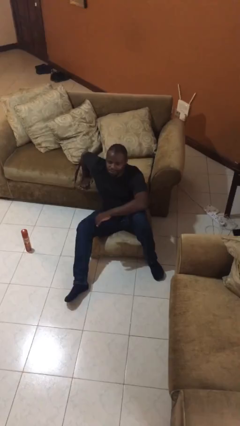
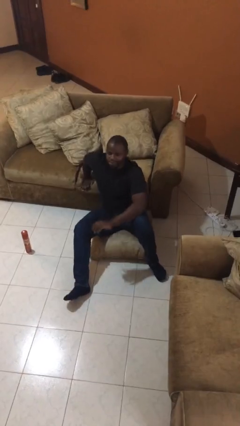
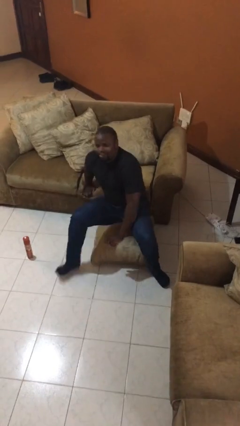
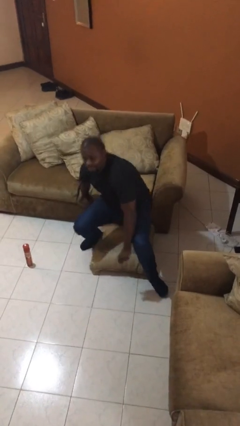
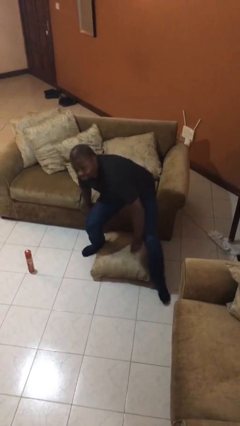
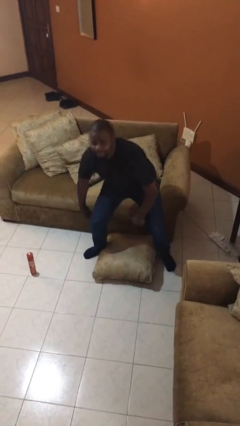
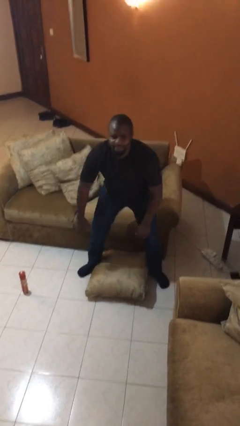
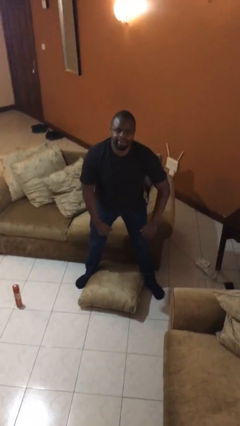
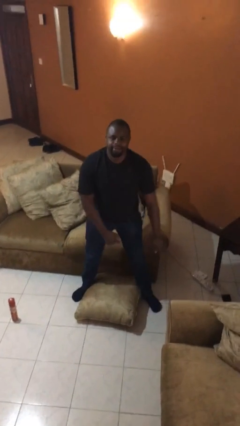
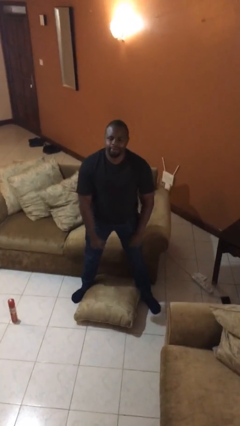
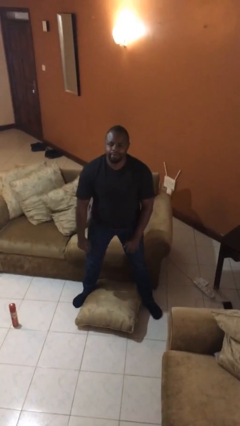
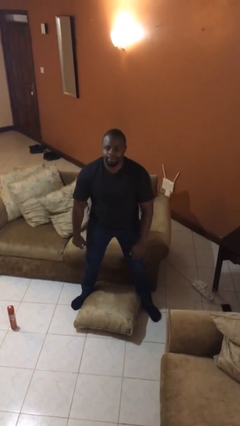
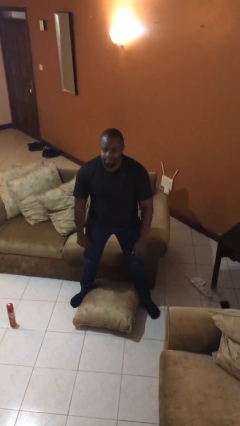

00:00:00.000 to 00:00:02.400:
person stands up from floor

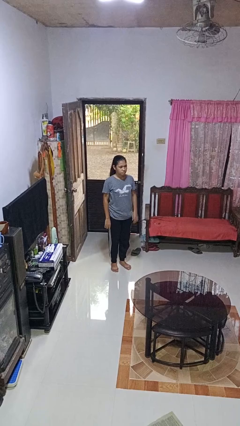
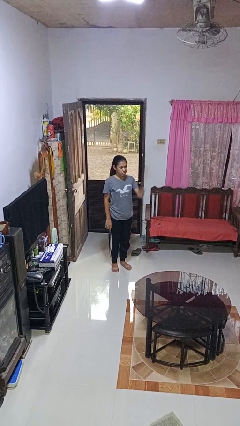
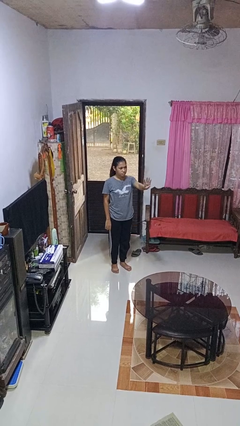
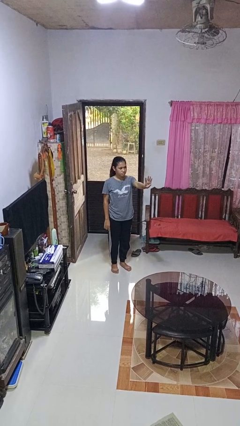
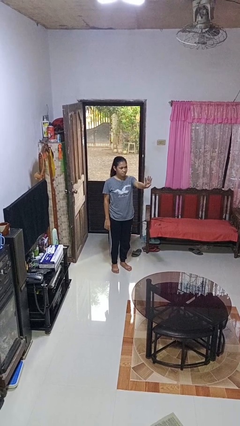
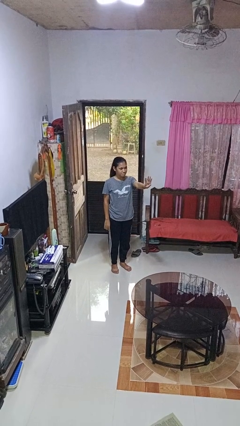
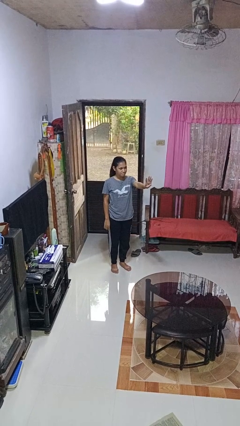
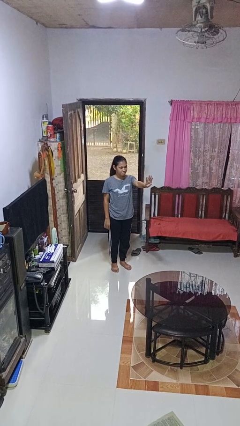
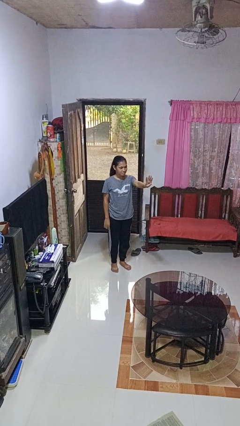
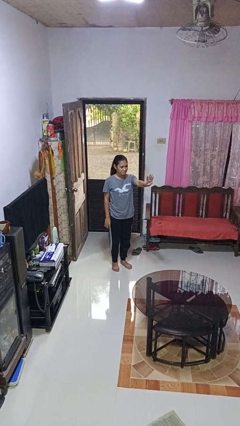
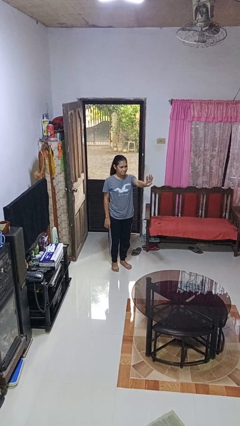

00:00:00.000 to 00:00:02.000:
person gestures number four

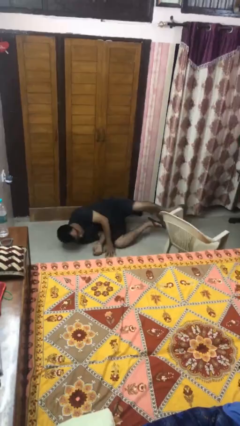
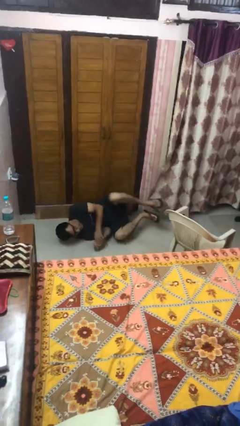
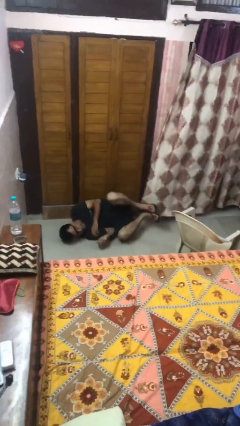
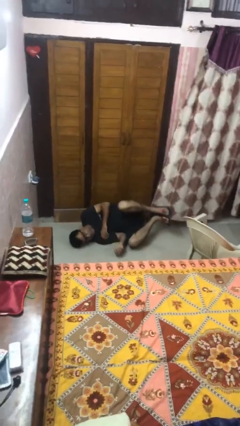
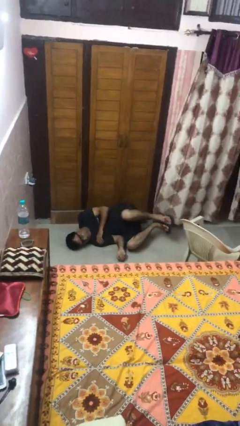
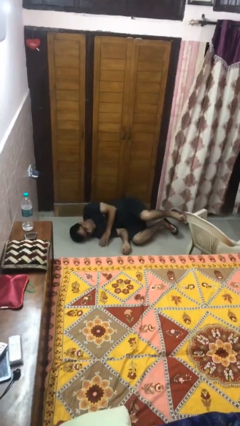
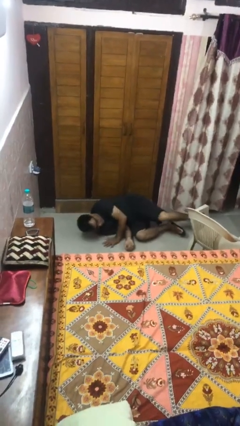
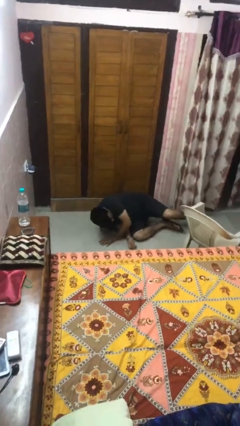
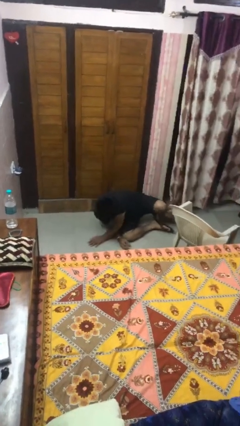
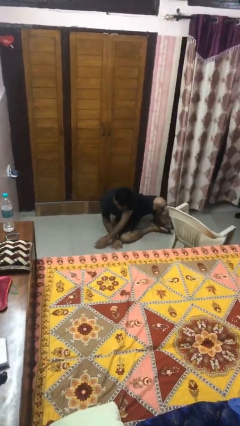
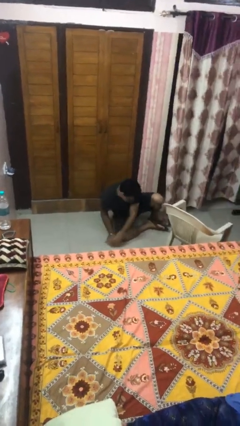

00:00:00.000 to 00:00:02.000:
person lies down on floor

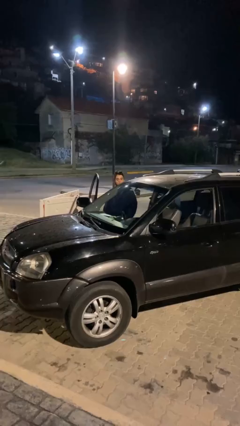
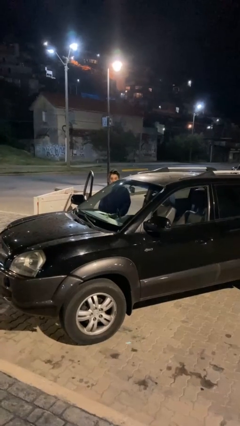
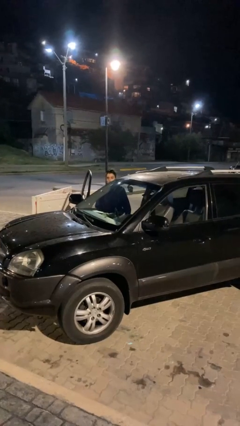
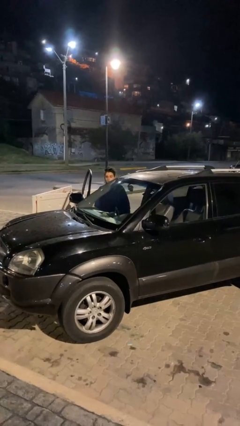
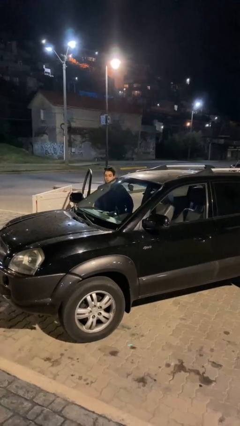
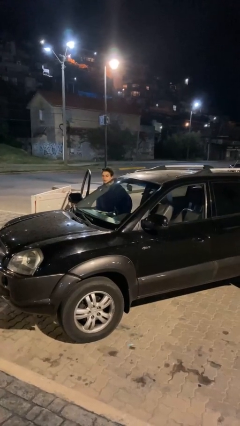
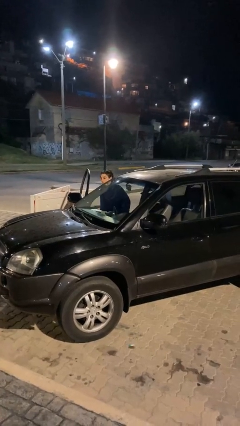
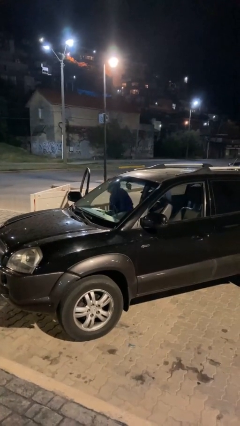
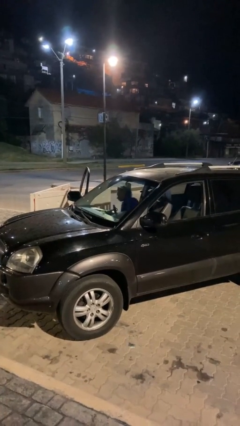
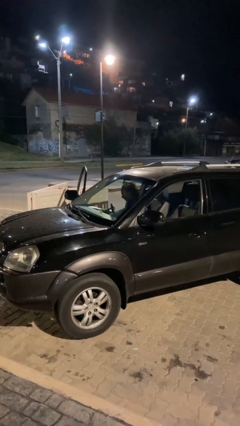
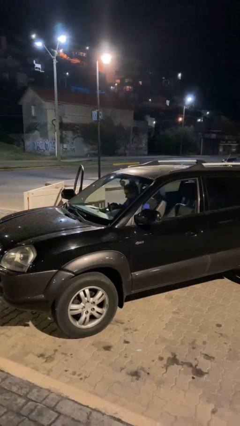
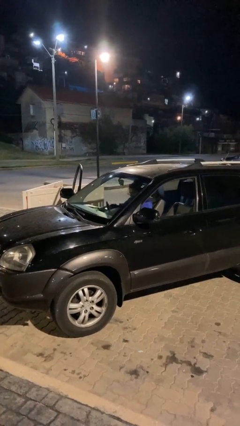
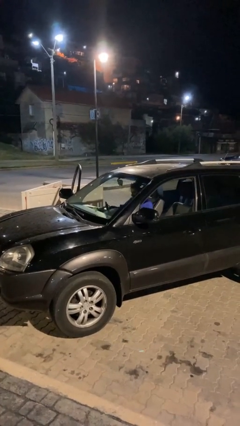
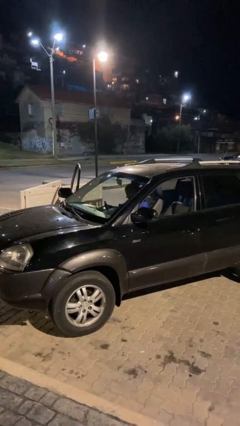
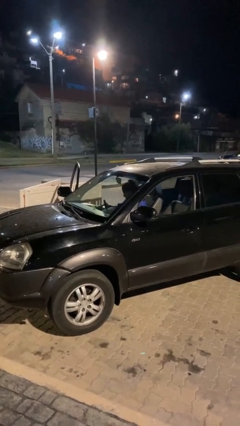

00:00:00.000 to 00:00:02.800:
person enters car

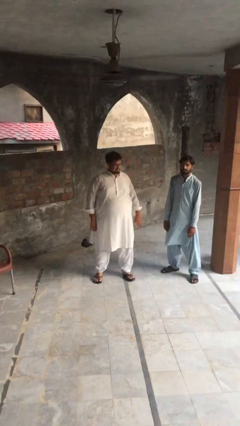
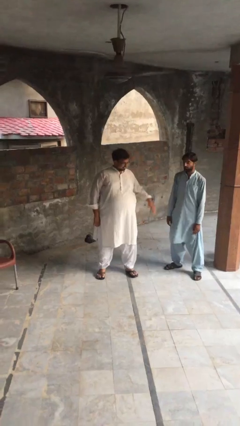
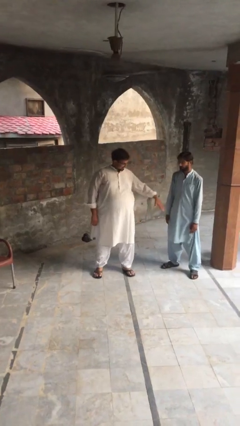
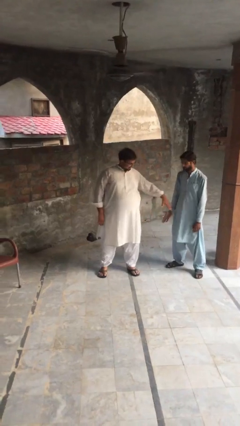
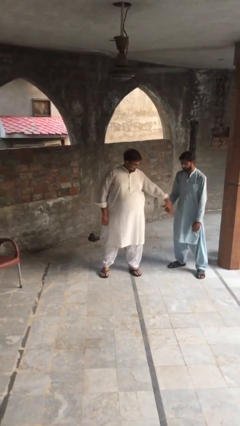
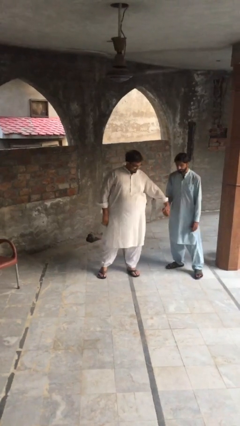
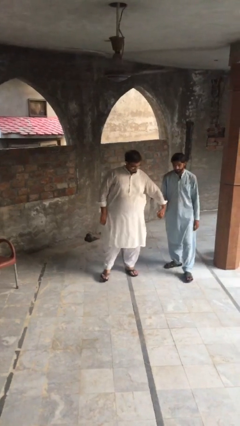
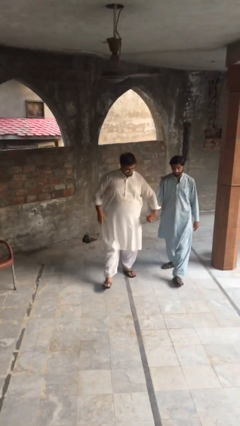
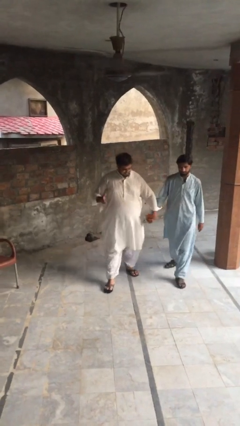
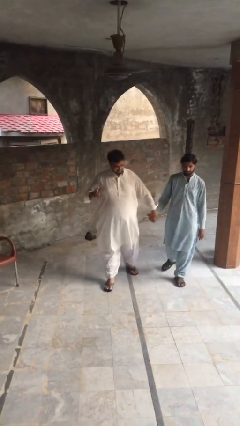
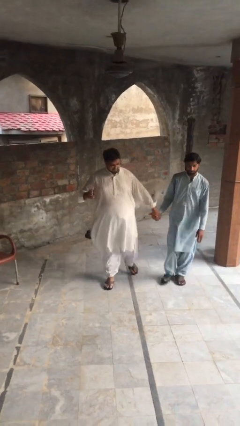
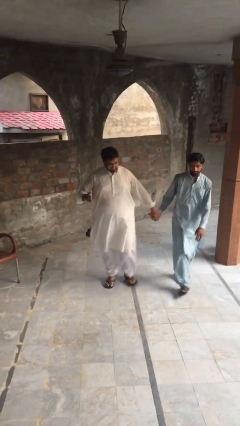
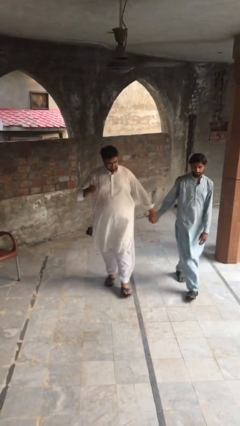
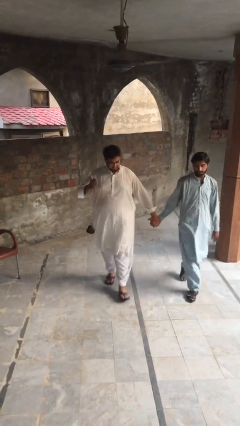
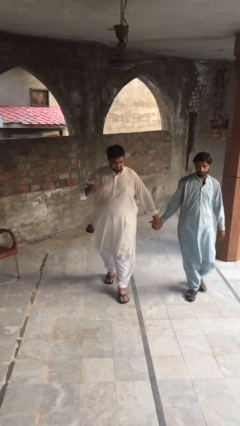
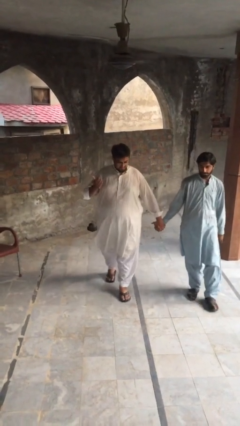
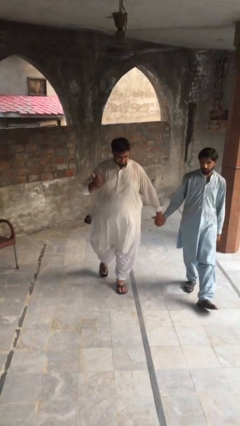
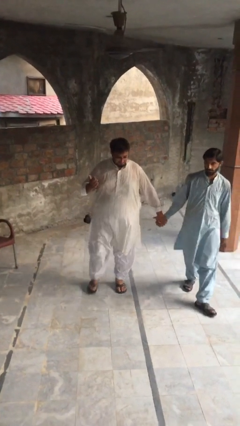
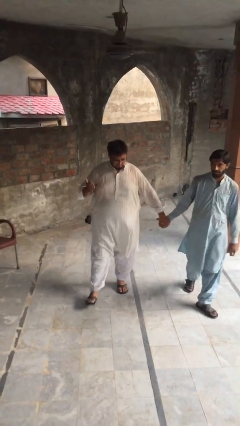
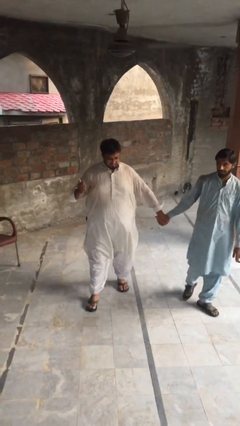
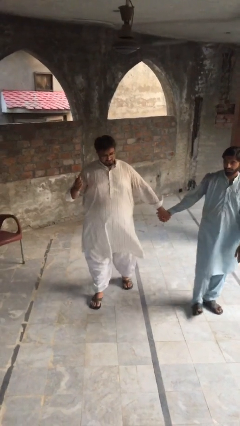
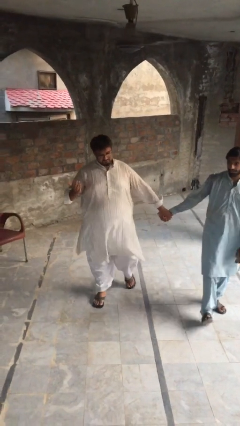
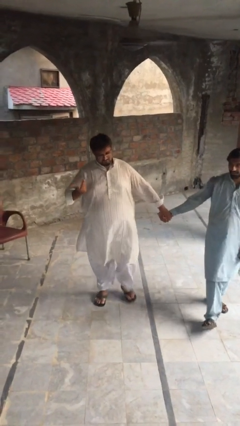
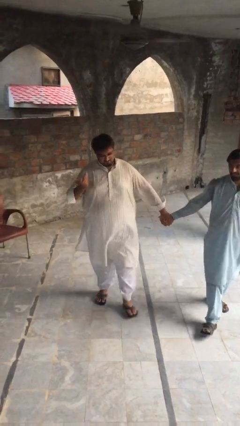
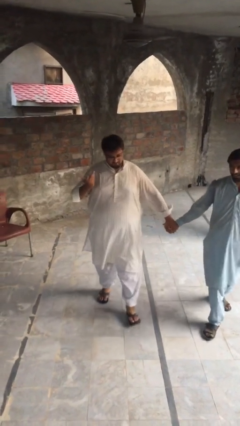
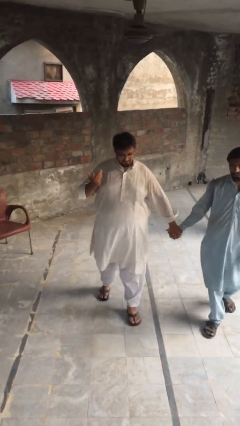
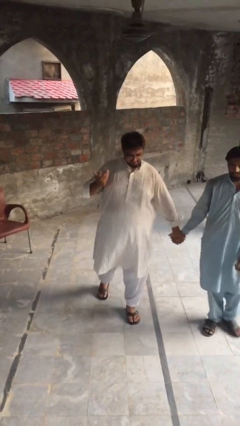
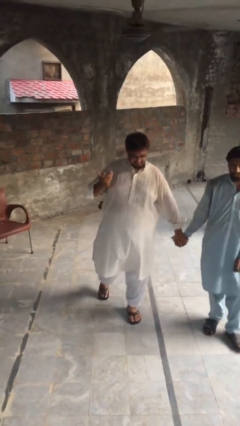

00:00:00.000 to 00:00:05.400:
person holds hand

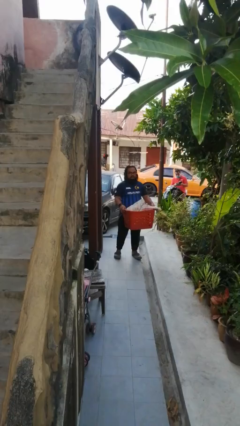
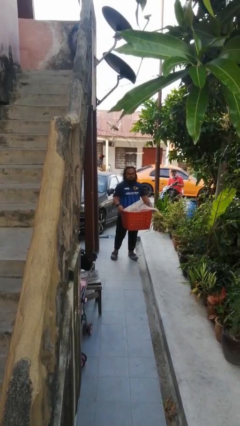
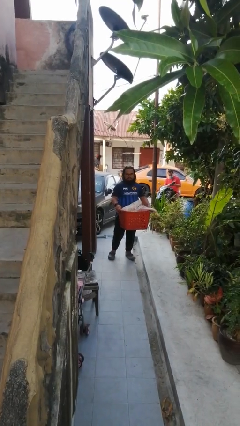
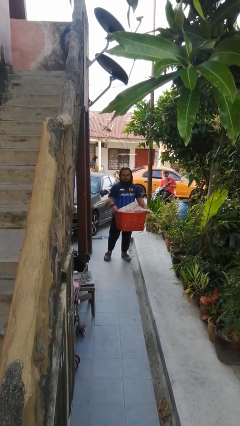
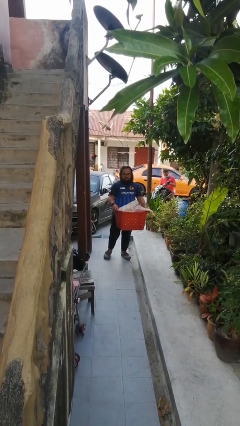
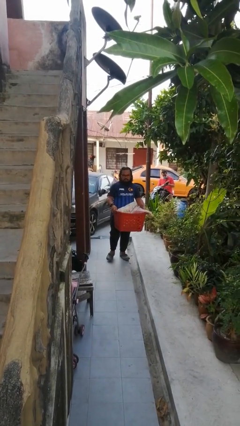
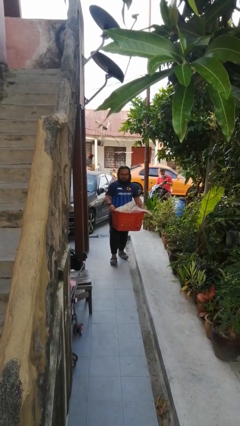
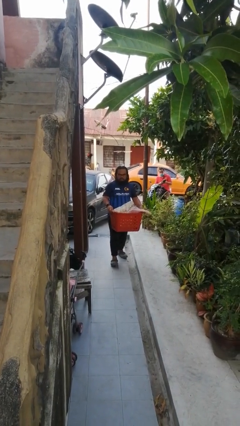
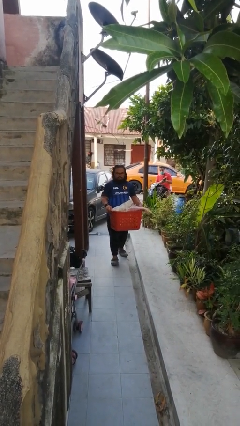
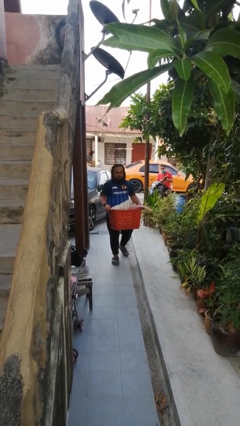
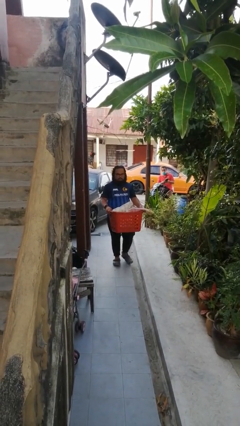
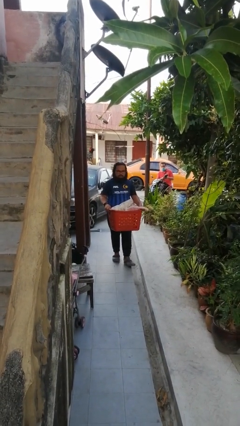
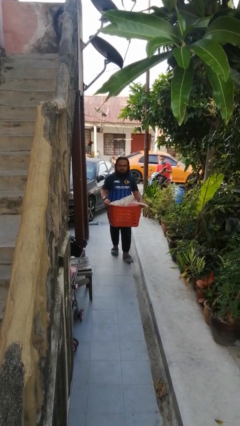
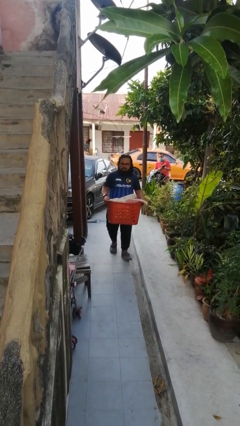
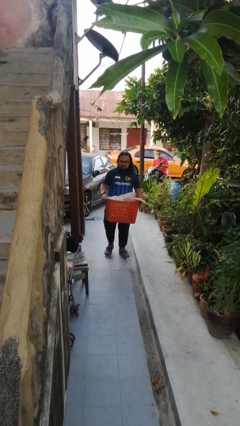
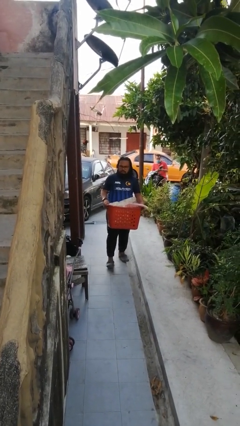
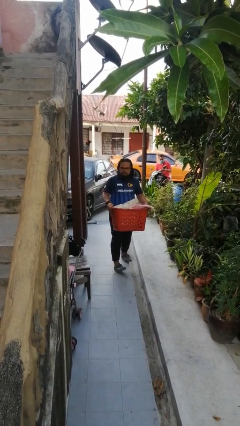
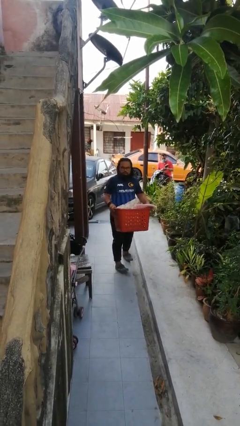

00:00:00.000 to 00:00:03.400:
person carries laundry basket
